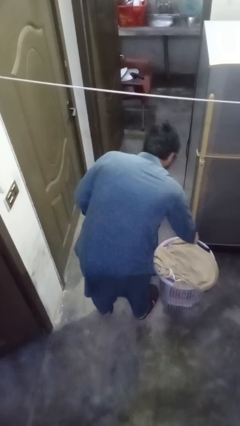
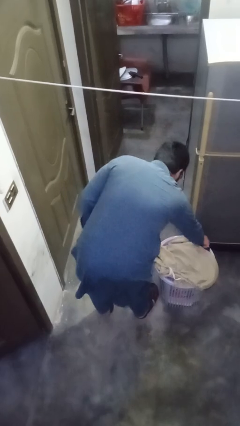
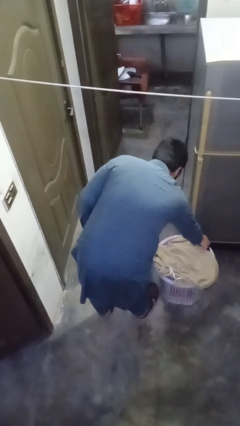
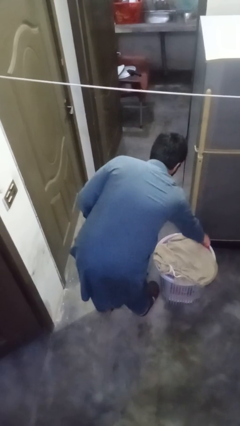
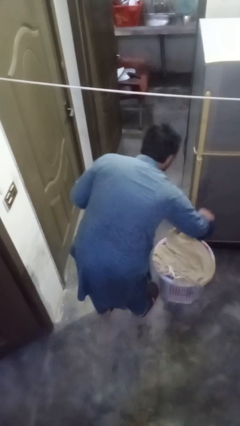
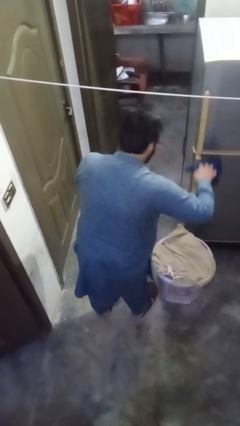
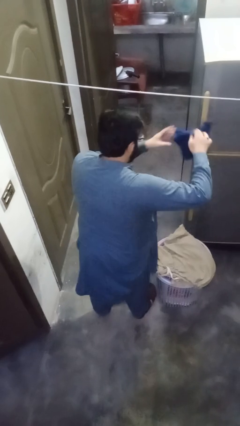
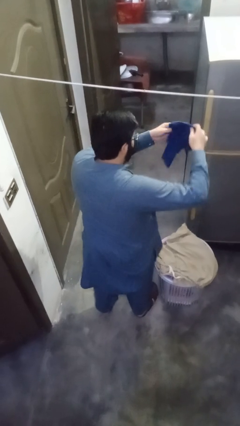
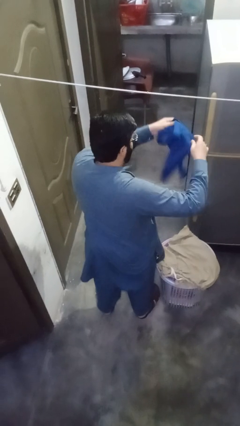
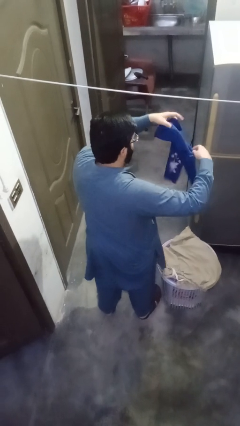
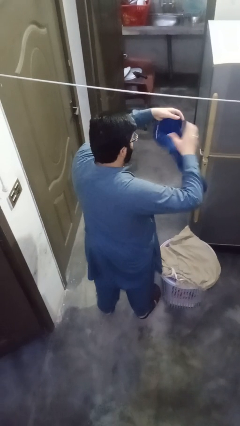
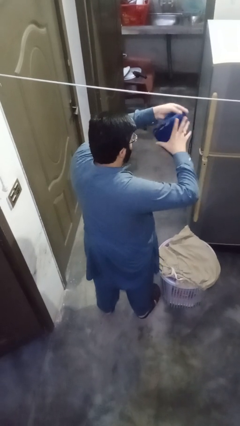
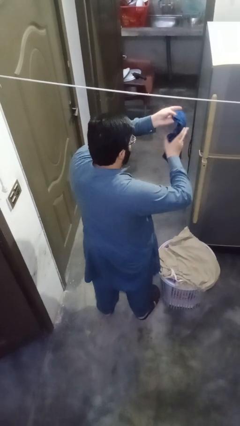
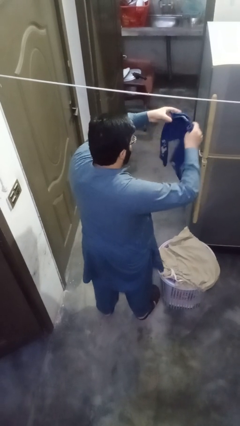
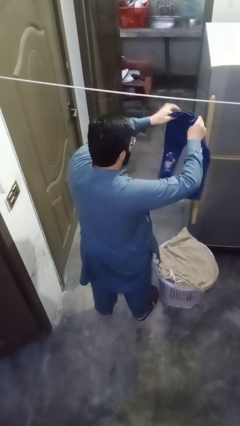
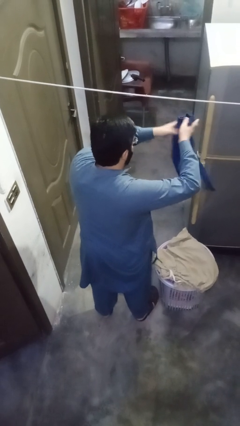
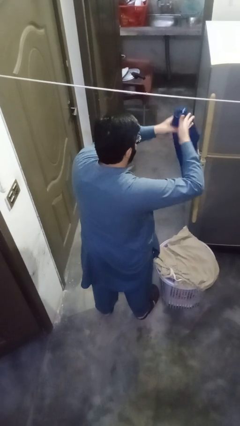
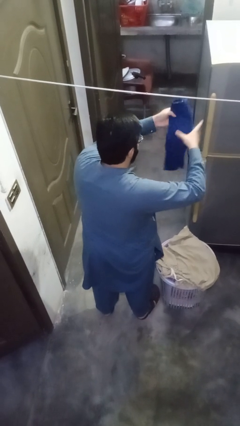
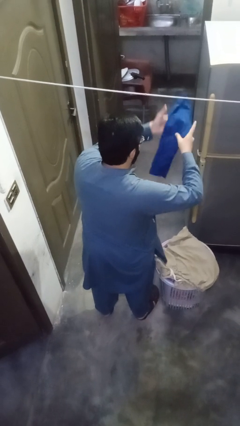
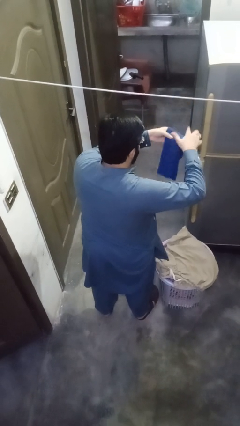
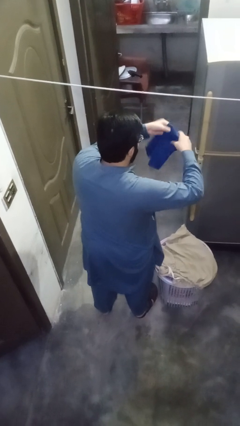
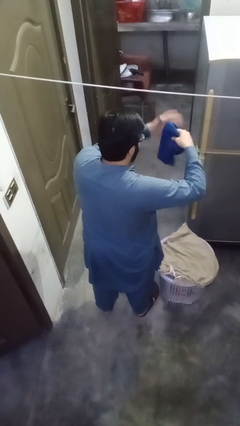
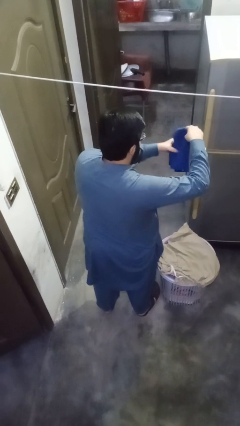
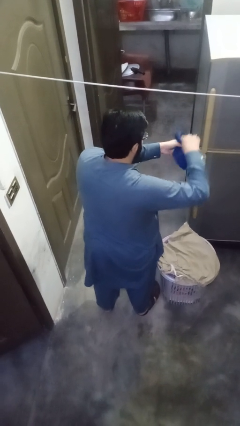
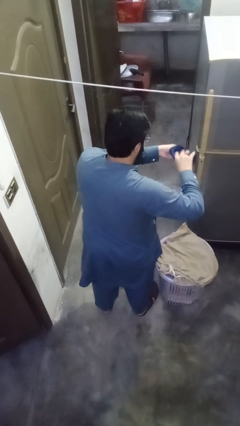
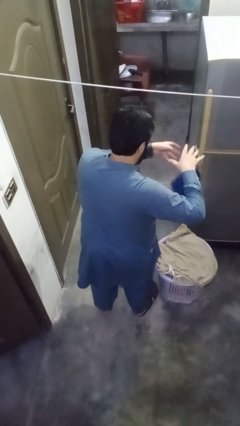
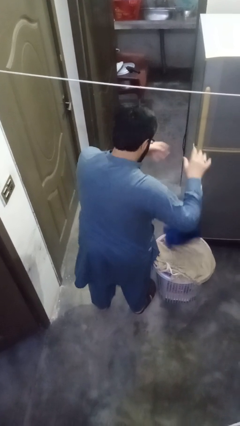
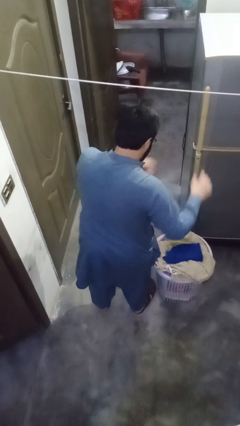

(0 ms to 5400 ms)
person folds pants

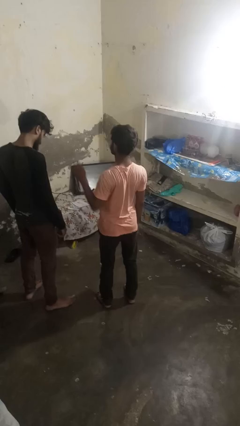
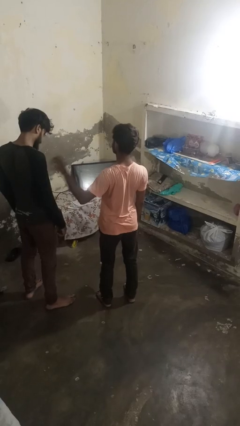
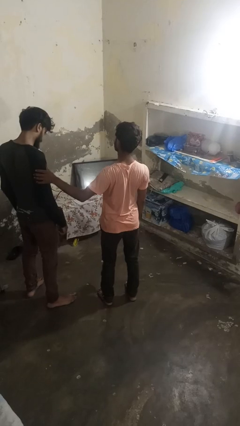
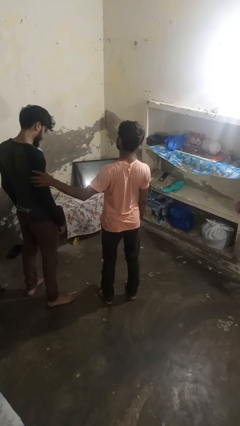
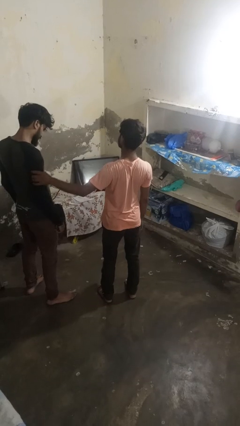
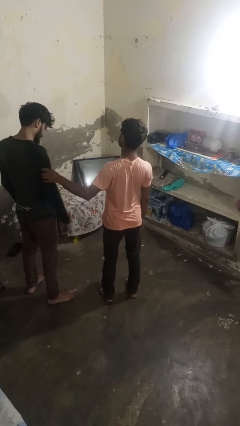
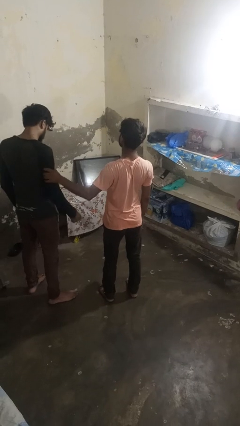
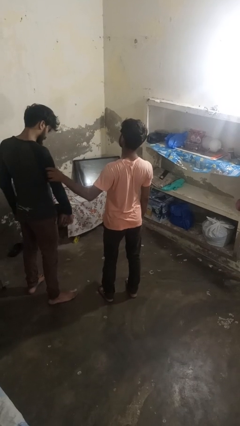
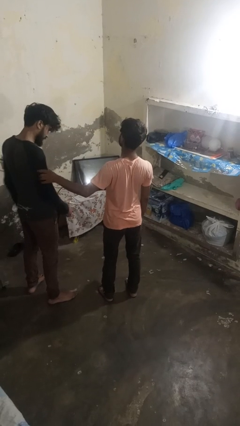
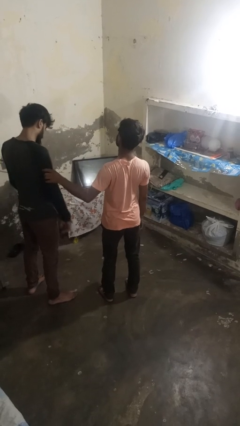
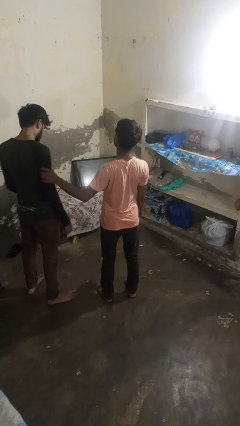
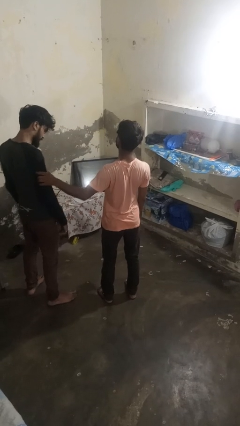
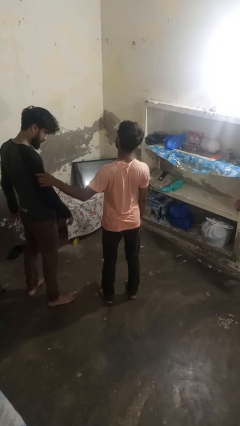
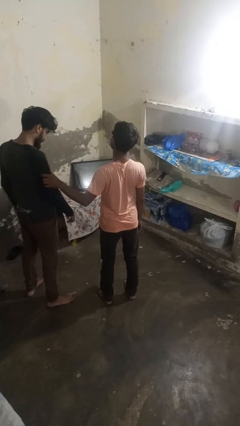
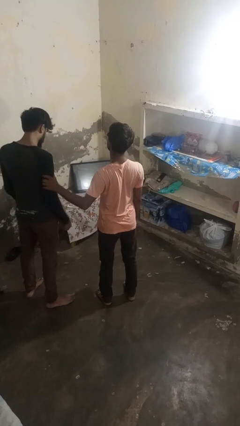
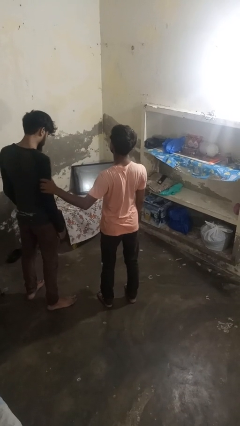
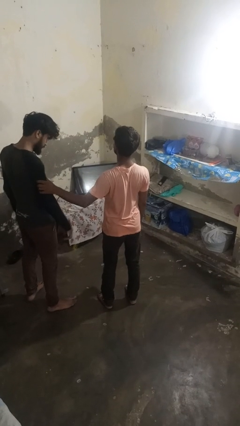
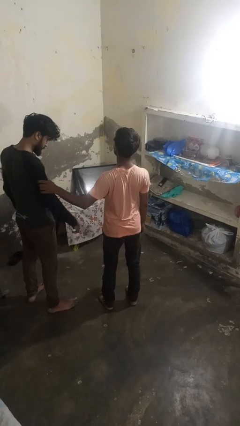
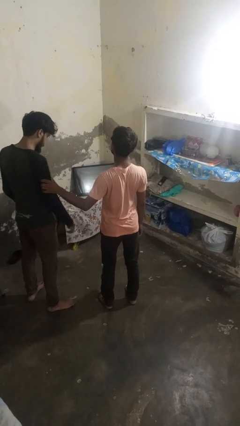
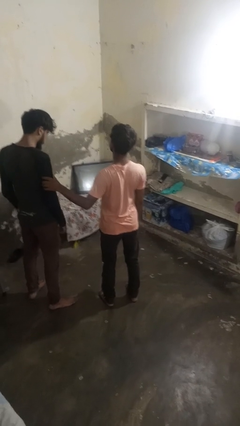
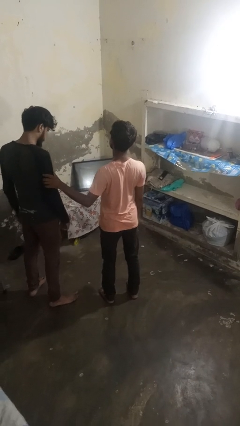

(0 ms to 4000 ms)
person grabs person by bicep

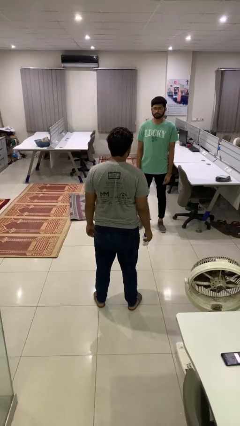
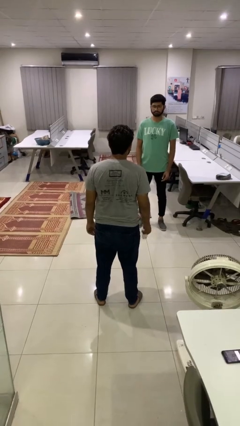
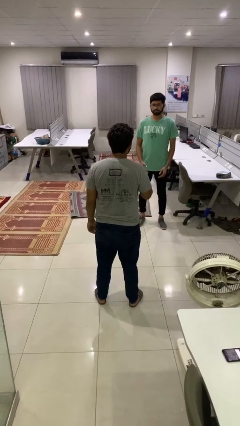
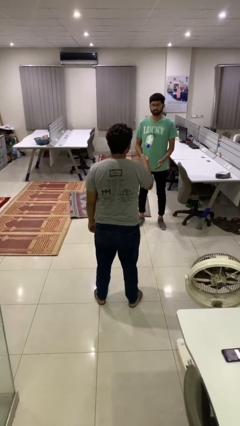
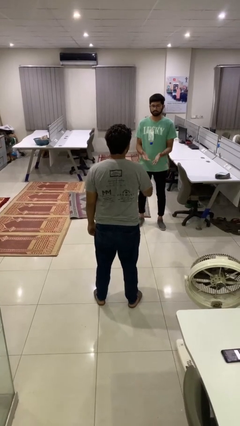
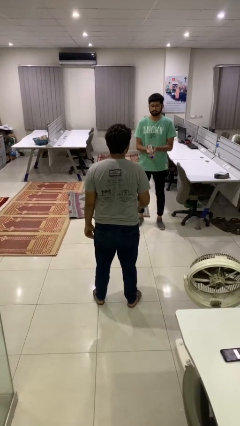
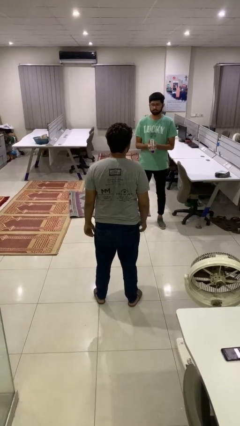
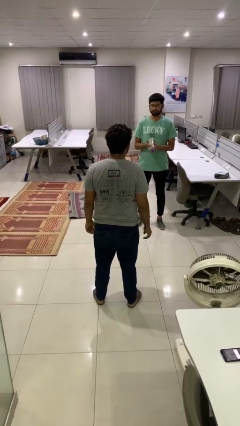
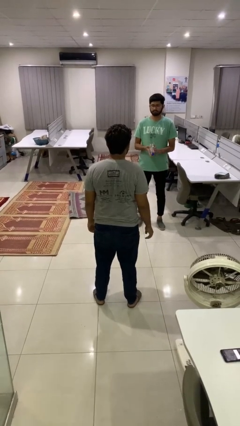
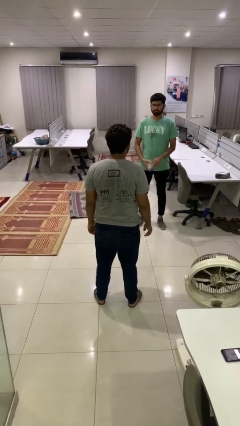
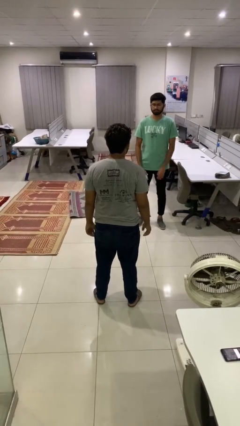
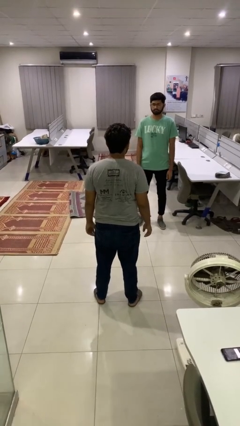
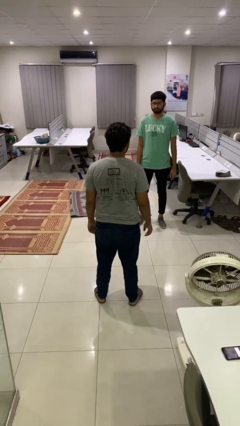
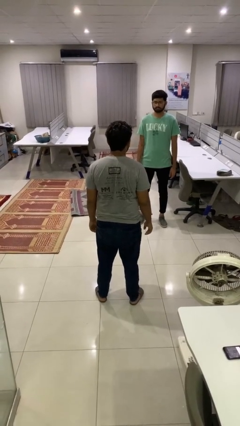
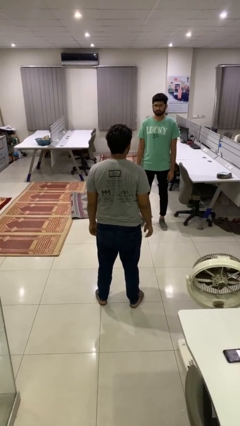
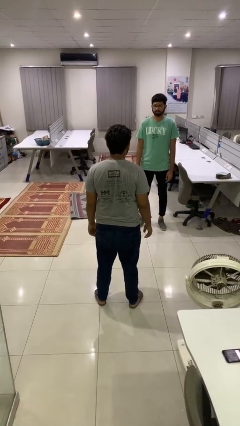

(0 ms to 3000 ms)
person throws object to person

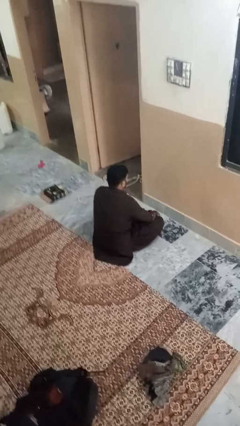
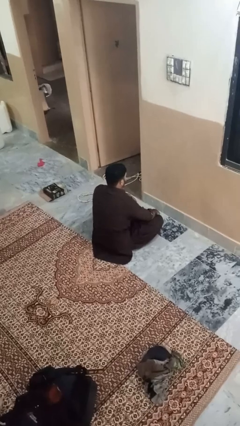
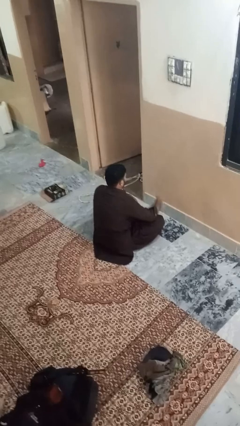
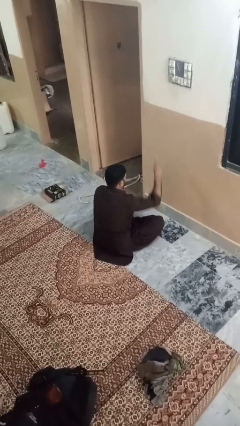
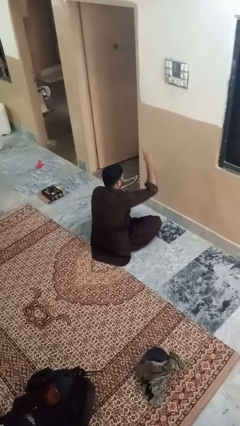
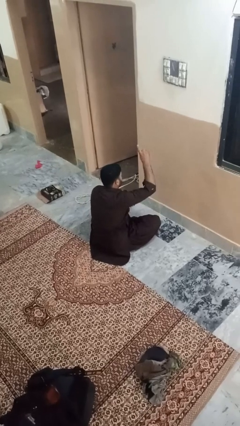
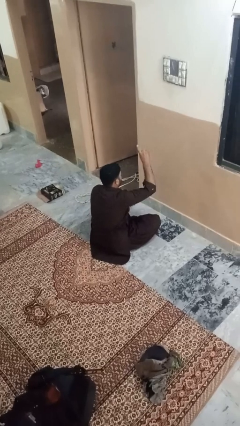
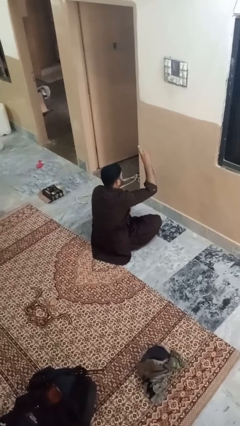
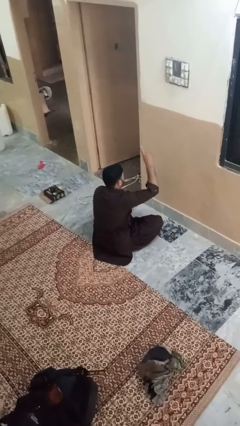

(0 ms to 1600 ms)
person gestures number one

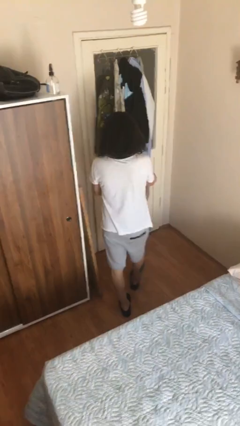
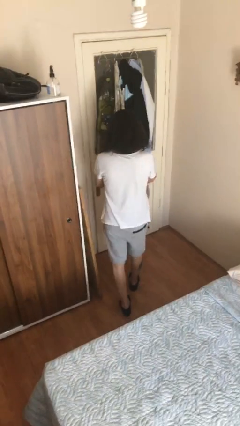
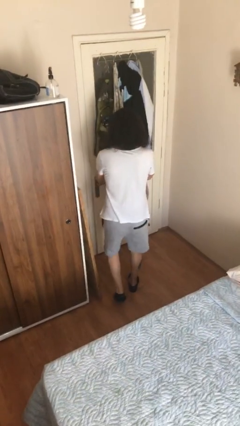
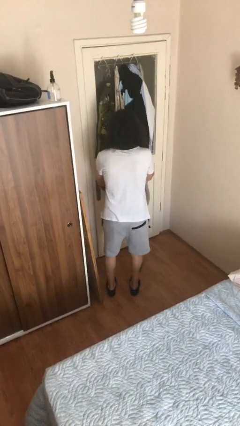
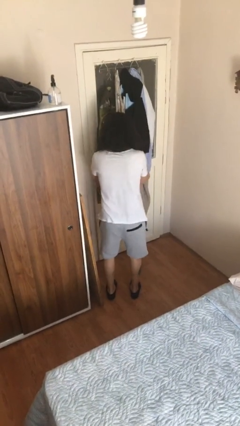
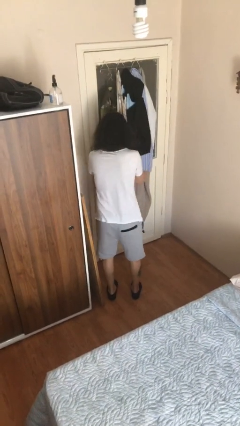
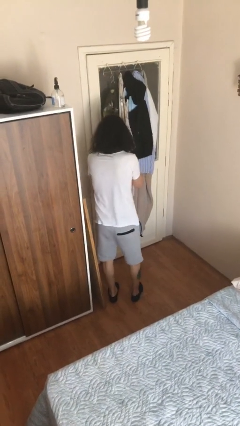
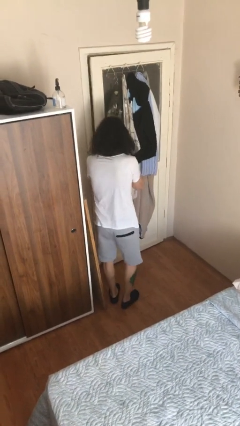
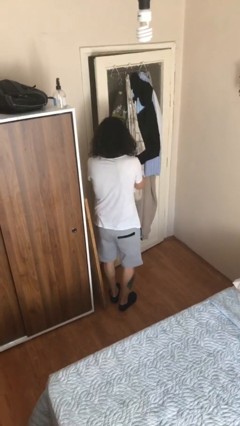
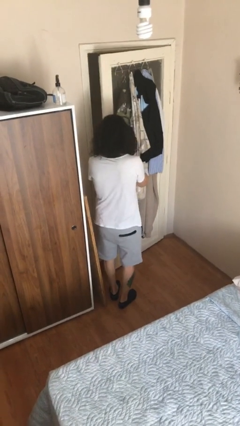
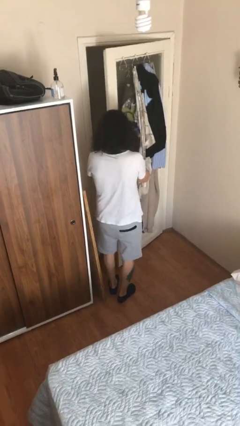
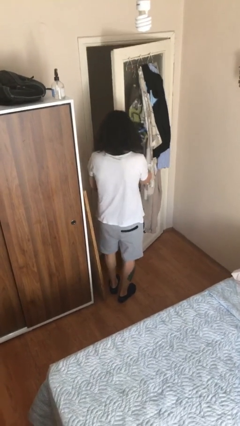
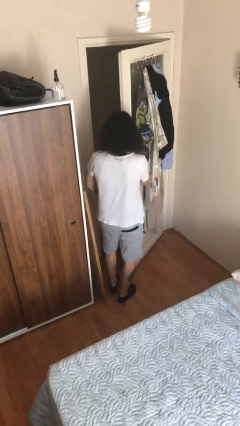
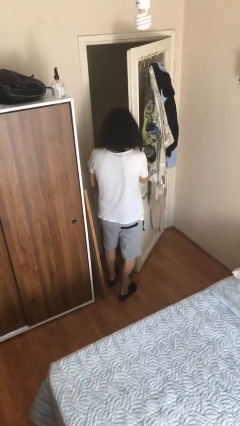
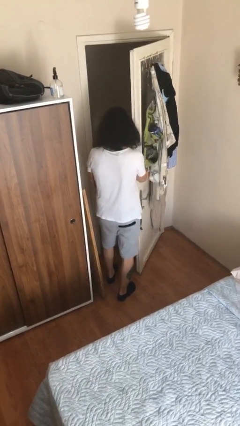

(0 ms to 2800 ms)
person opens facility door

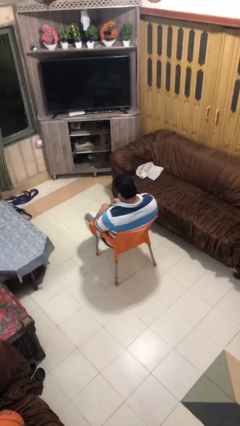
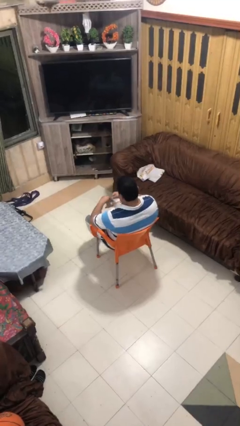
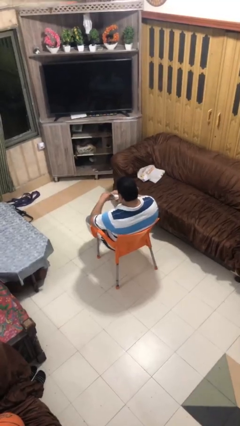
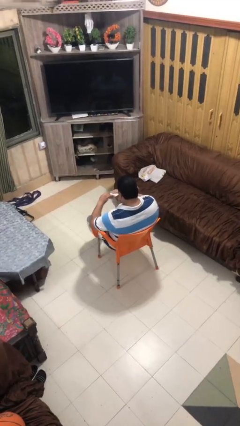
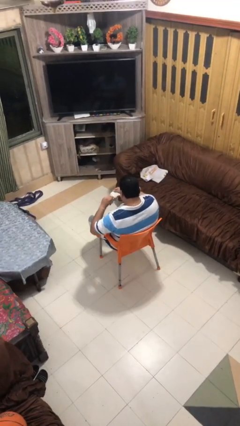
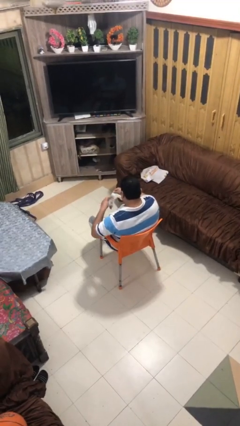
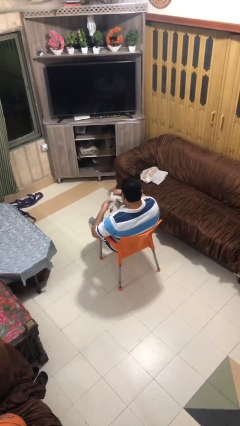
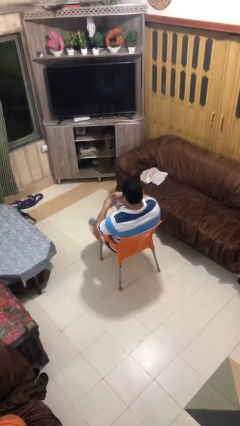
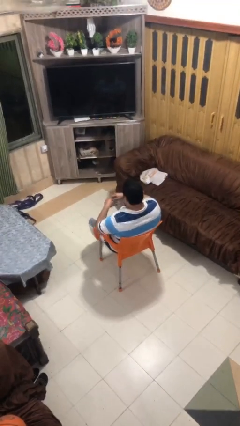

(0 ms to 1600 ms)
person tears paper
